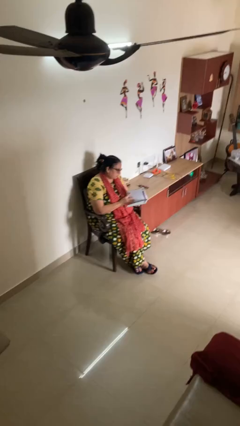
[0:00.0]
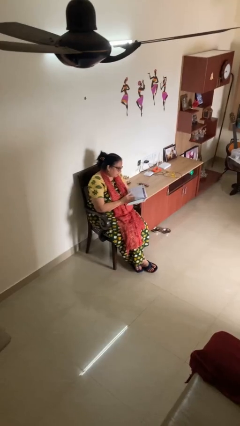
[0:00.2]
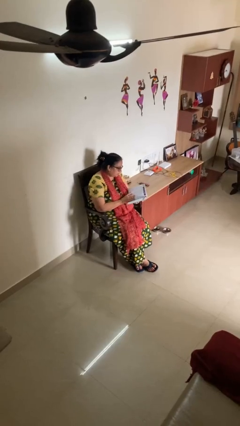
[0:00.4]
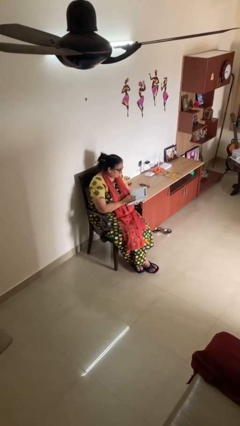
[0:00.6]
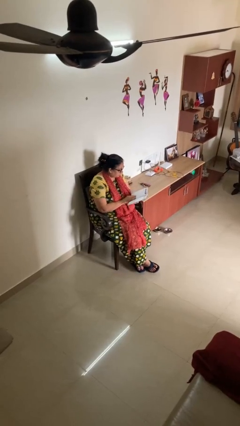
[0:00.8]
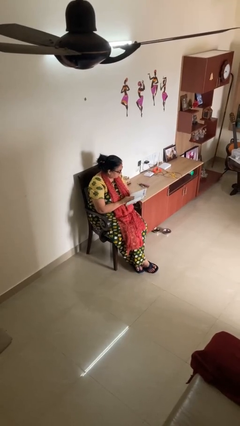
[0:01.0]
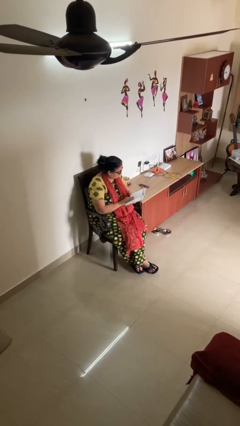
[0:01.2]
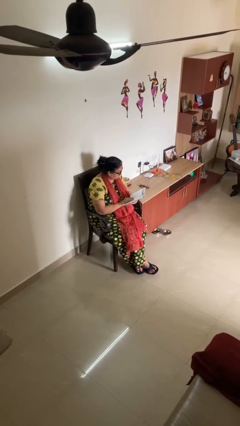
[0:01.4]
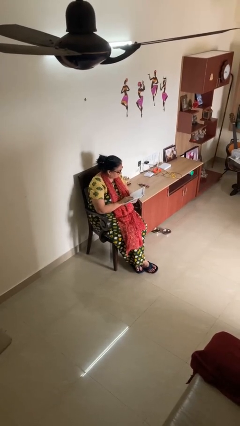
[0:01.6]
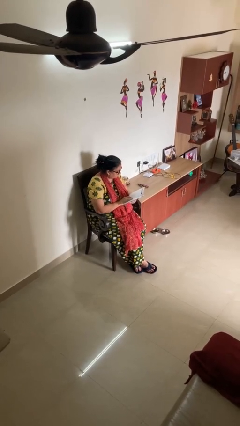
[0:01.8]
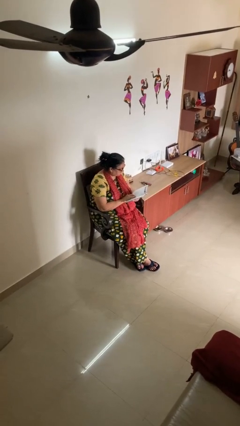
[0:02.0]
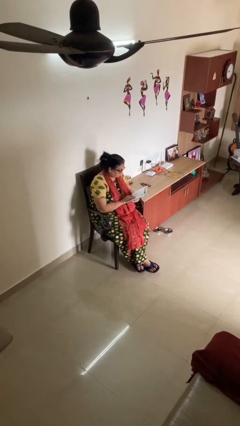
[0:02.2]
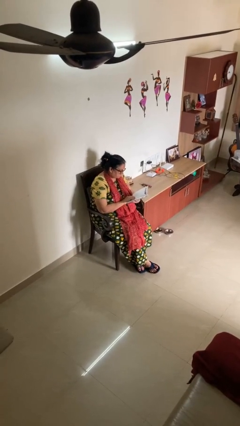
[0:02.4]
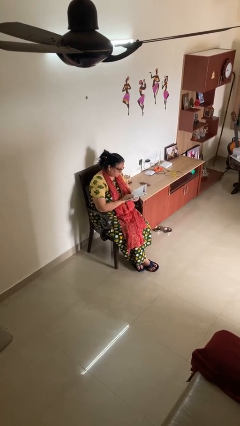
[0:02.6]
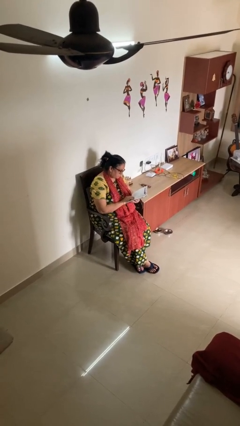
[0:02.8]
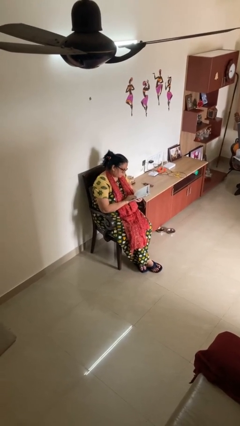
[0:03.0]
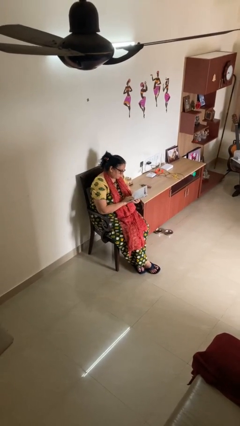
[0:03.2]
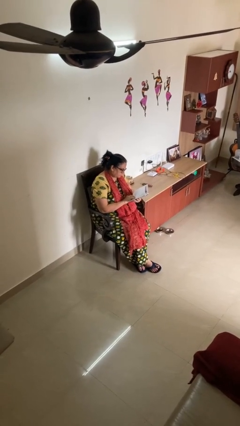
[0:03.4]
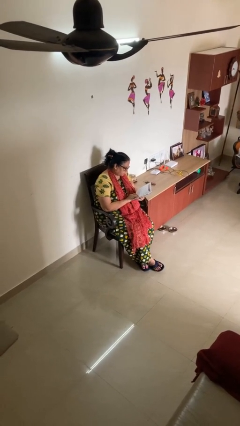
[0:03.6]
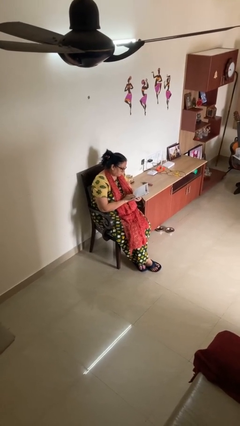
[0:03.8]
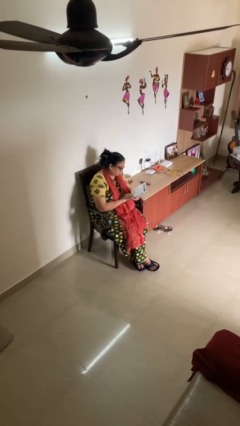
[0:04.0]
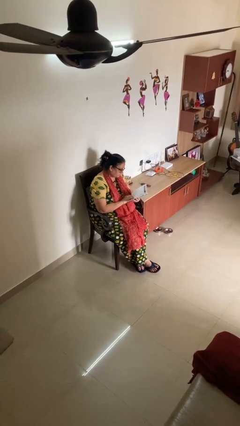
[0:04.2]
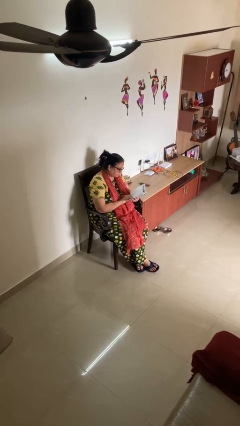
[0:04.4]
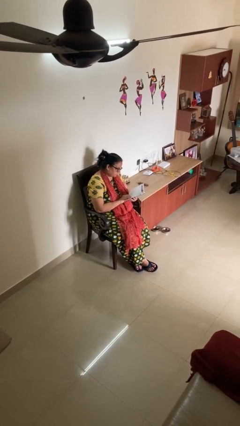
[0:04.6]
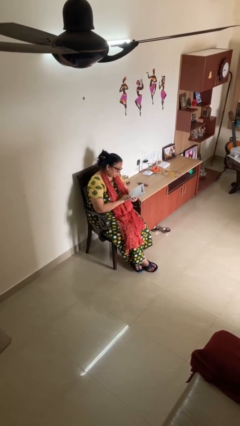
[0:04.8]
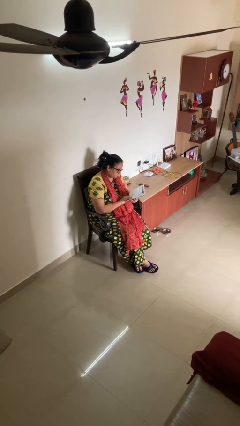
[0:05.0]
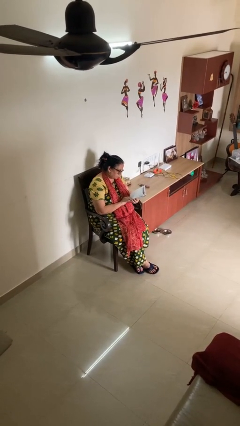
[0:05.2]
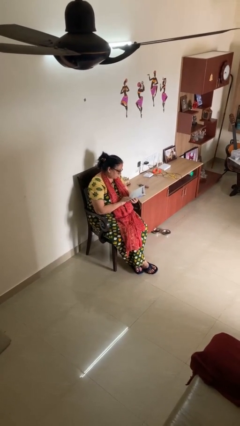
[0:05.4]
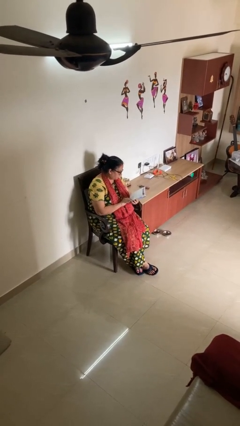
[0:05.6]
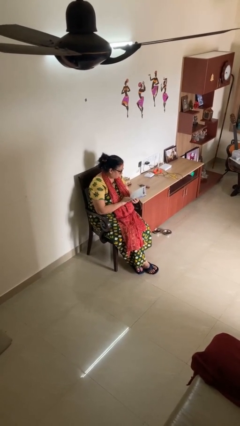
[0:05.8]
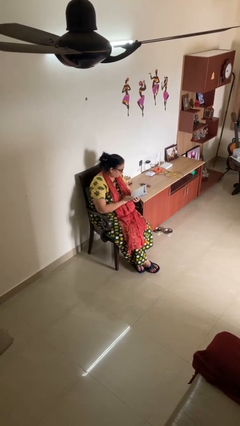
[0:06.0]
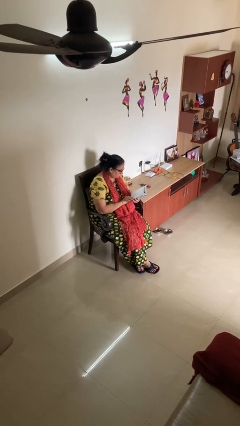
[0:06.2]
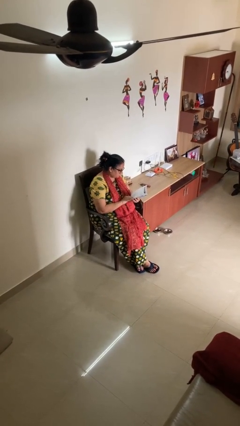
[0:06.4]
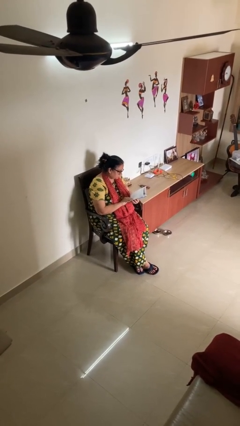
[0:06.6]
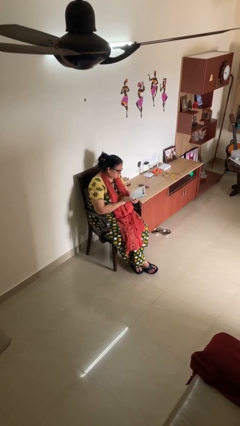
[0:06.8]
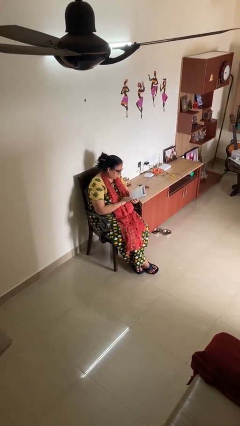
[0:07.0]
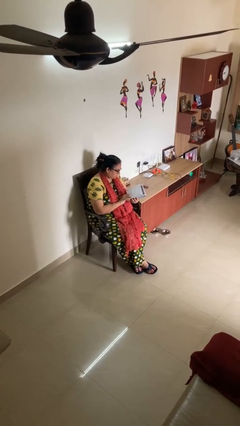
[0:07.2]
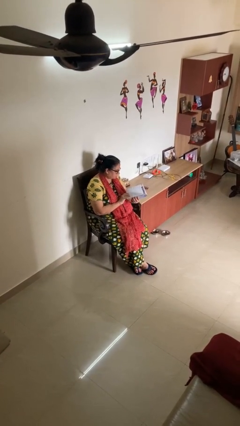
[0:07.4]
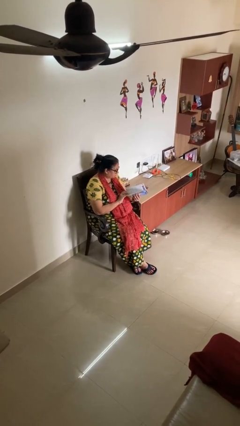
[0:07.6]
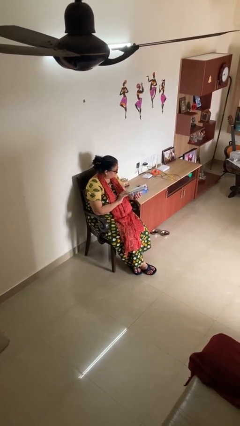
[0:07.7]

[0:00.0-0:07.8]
person reads document

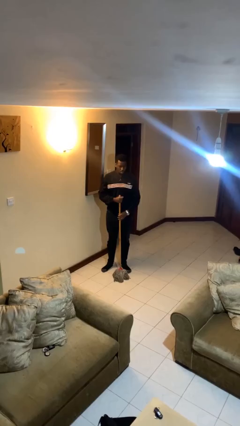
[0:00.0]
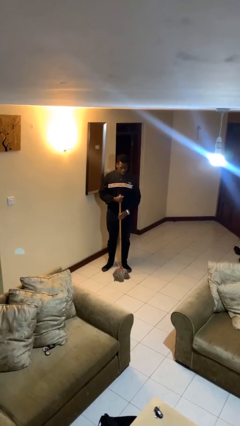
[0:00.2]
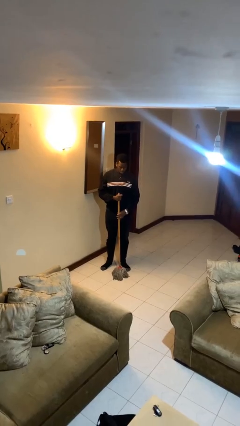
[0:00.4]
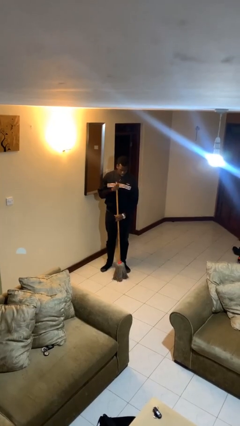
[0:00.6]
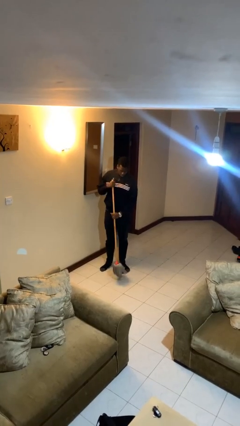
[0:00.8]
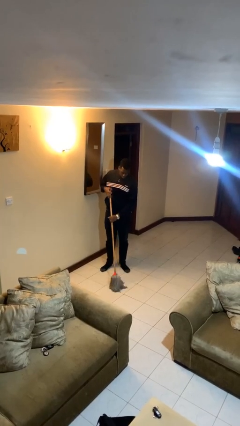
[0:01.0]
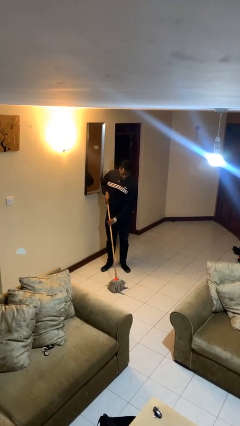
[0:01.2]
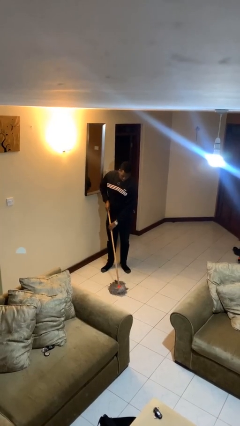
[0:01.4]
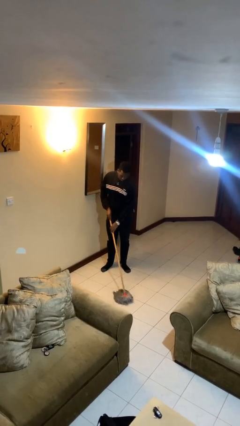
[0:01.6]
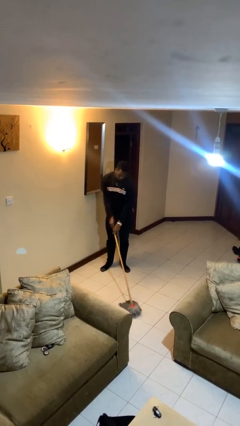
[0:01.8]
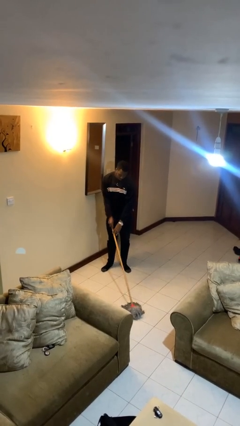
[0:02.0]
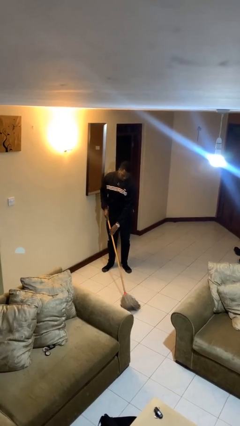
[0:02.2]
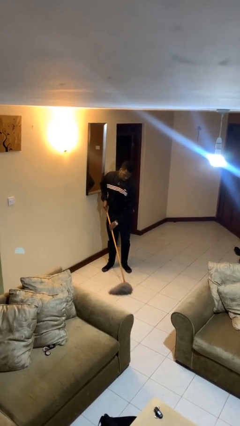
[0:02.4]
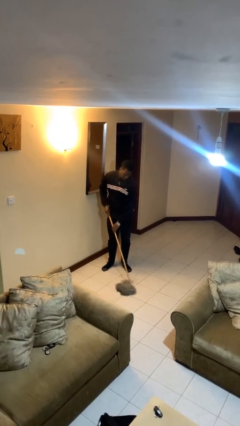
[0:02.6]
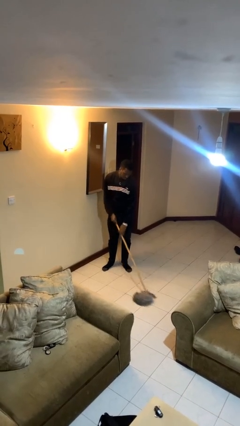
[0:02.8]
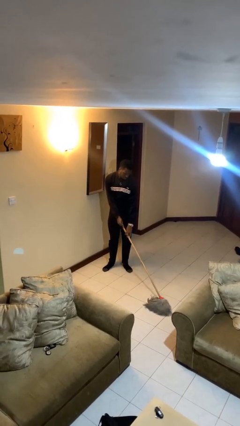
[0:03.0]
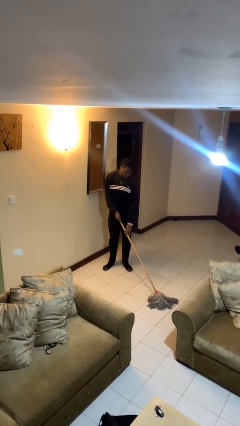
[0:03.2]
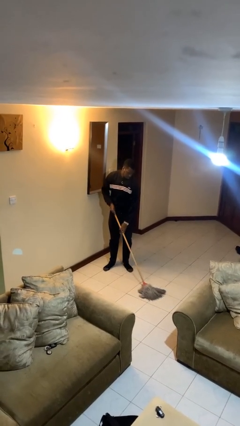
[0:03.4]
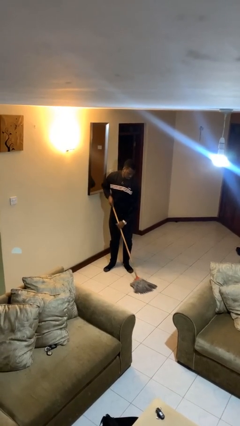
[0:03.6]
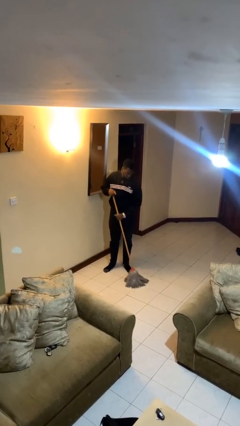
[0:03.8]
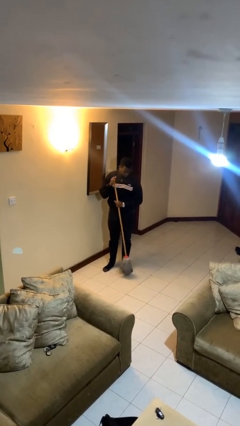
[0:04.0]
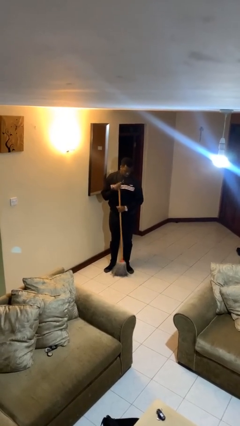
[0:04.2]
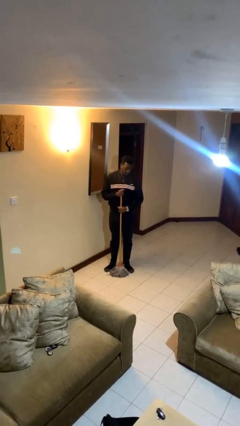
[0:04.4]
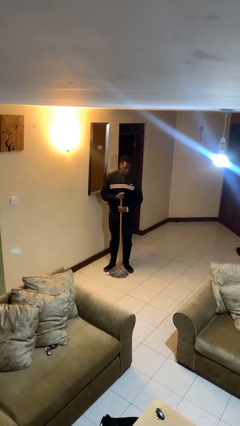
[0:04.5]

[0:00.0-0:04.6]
person mops

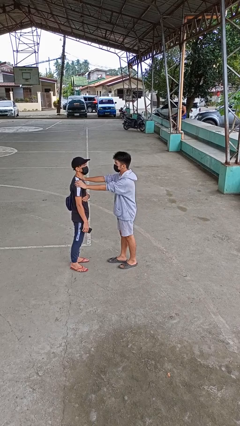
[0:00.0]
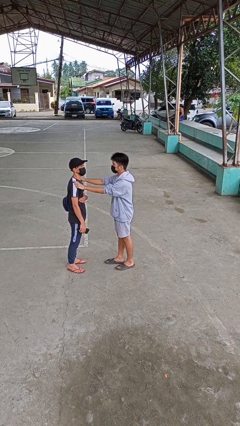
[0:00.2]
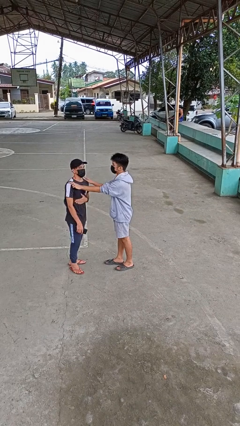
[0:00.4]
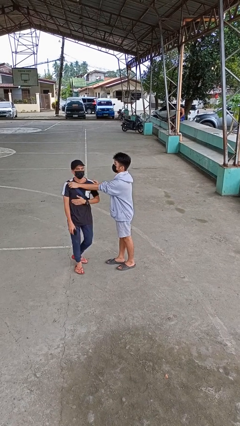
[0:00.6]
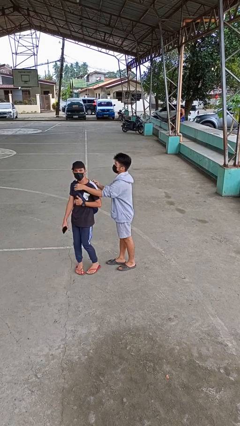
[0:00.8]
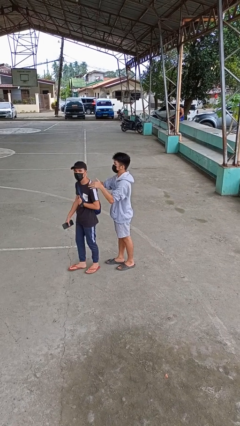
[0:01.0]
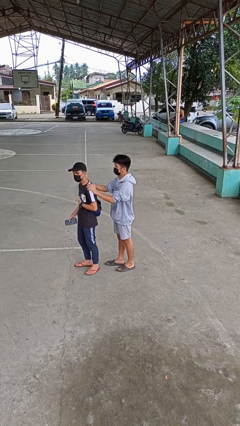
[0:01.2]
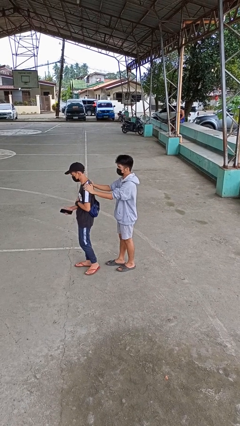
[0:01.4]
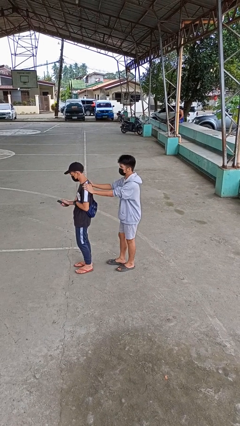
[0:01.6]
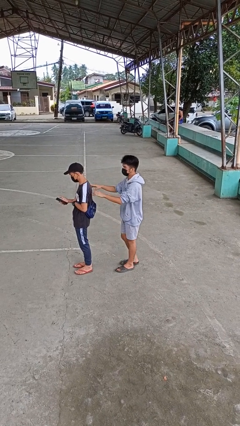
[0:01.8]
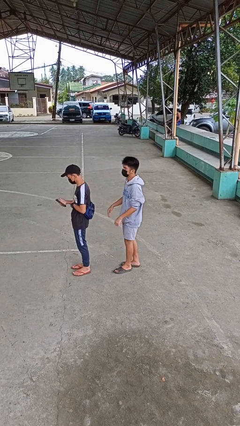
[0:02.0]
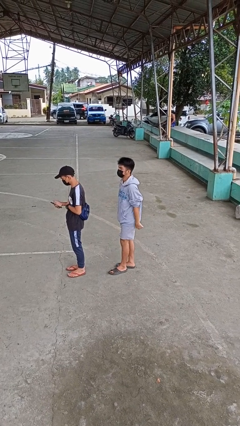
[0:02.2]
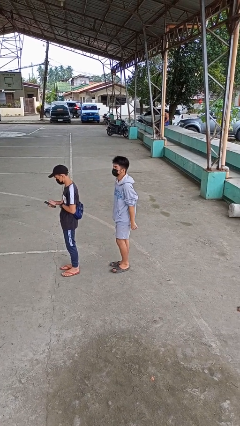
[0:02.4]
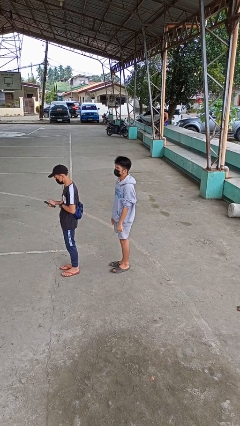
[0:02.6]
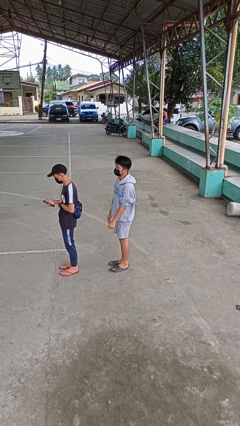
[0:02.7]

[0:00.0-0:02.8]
person spins person around

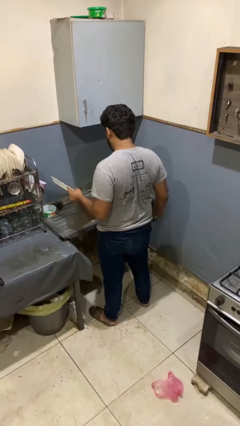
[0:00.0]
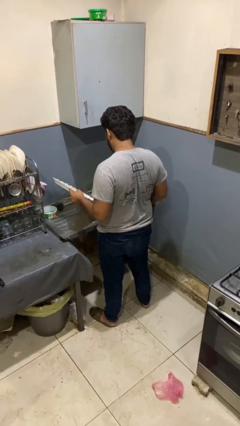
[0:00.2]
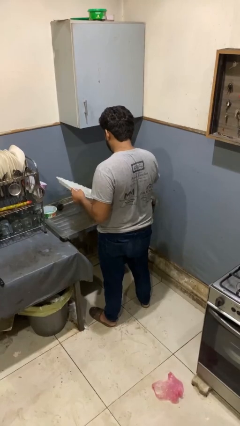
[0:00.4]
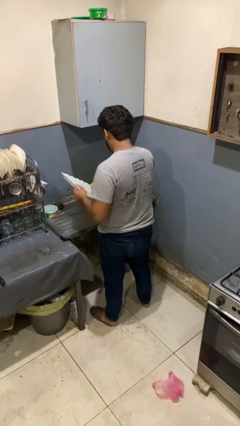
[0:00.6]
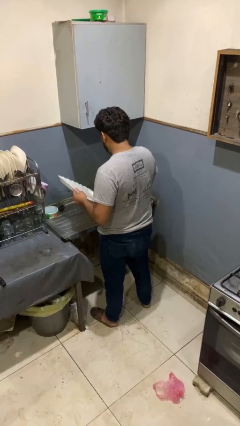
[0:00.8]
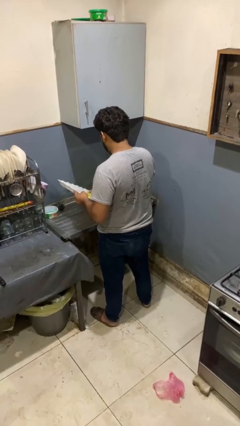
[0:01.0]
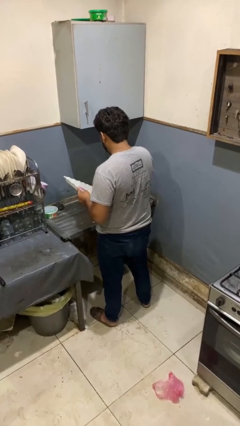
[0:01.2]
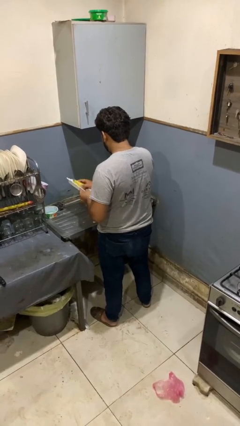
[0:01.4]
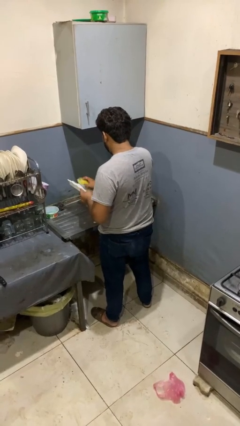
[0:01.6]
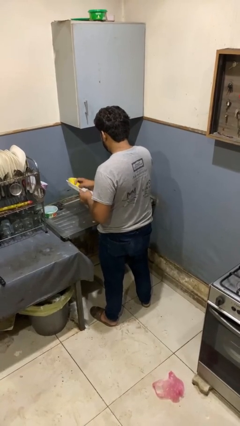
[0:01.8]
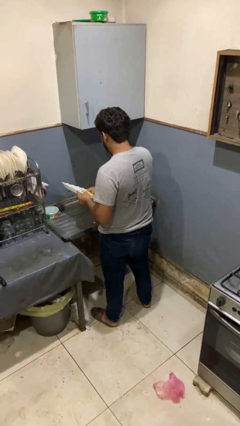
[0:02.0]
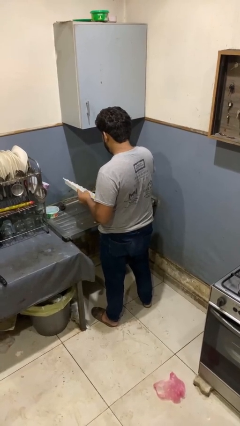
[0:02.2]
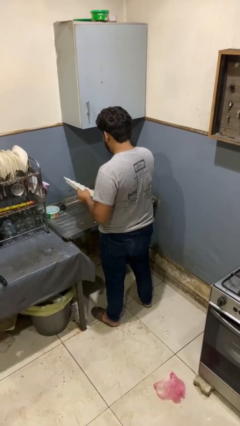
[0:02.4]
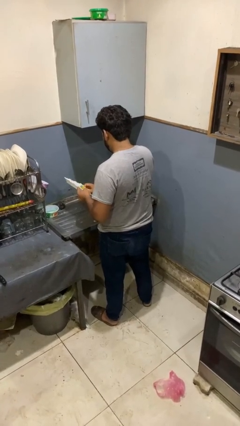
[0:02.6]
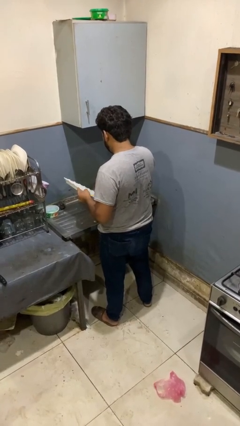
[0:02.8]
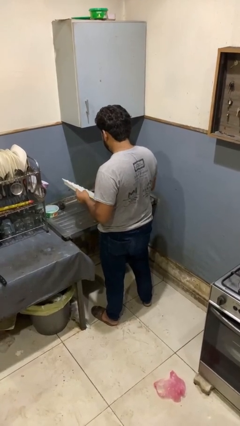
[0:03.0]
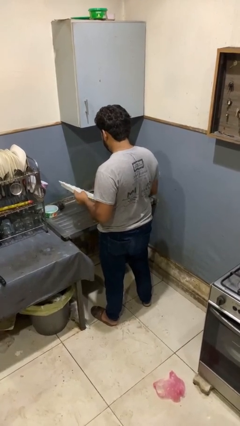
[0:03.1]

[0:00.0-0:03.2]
person washes dish
